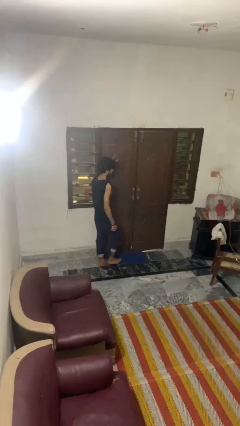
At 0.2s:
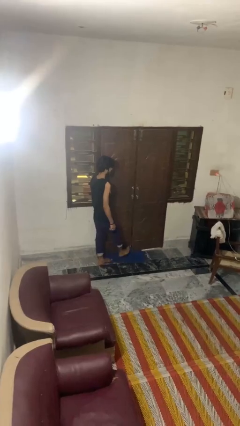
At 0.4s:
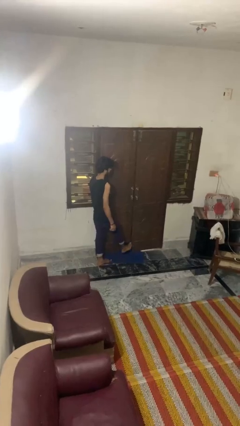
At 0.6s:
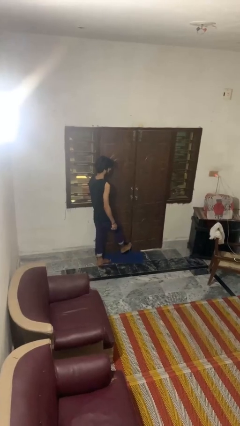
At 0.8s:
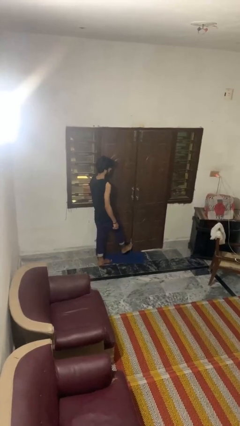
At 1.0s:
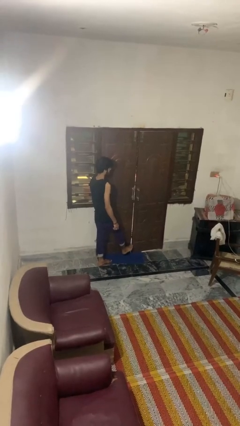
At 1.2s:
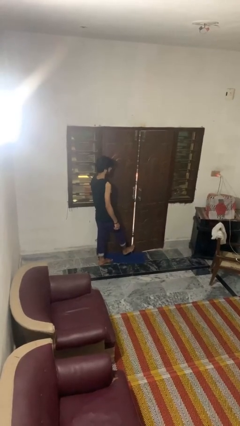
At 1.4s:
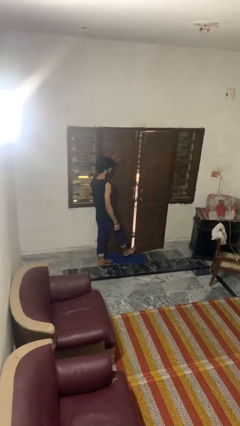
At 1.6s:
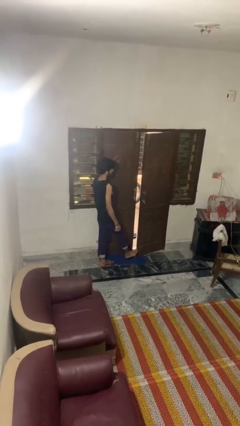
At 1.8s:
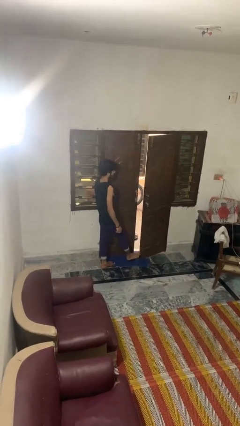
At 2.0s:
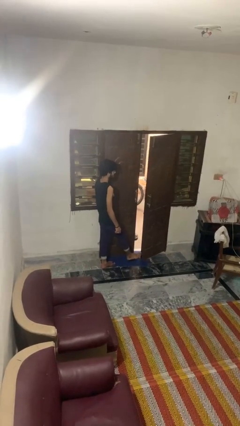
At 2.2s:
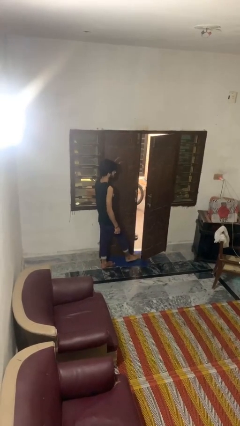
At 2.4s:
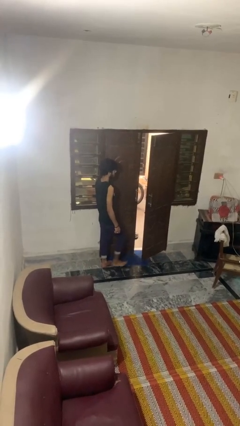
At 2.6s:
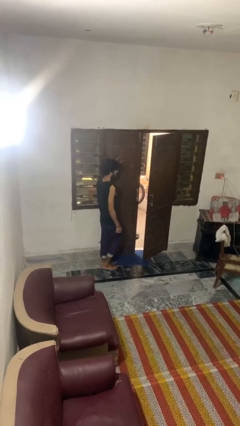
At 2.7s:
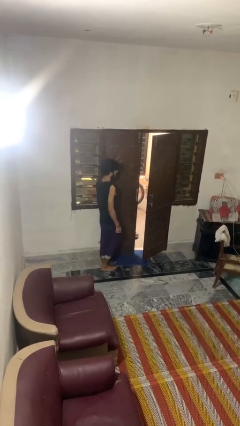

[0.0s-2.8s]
person opens facility door

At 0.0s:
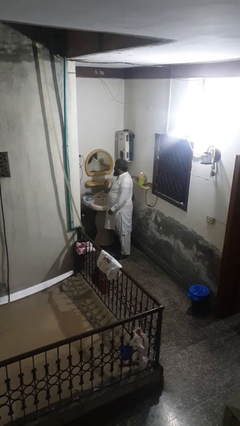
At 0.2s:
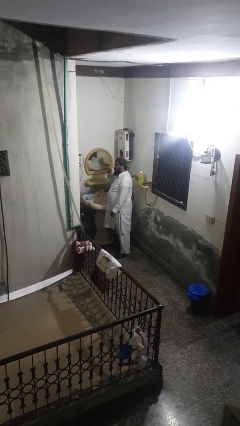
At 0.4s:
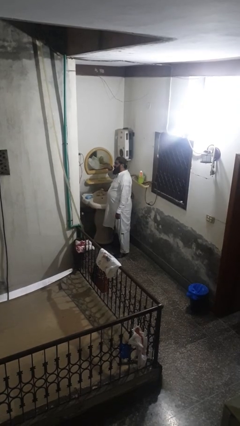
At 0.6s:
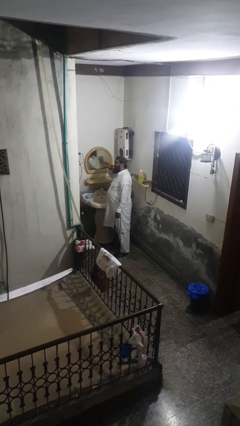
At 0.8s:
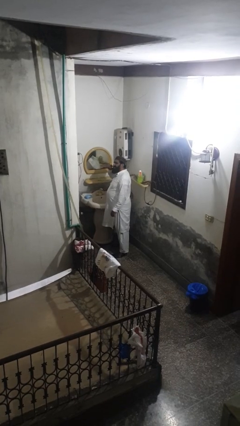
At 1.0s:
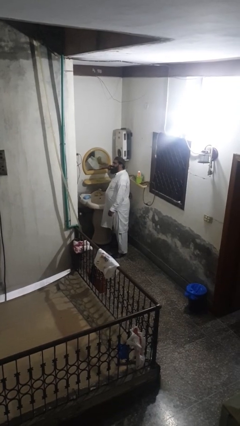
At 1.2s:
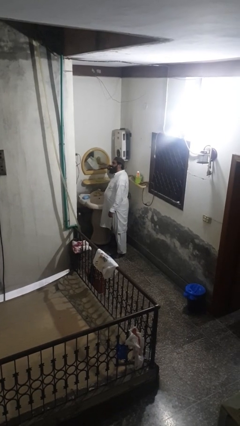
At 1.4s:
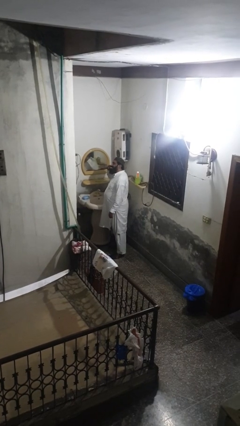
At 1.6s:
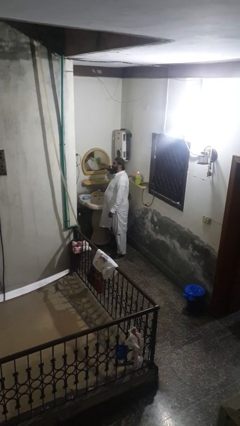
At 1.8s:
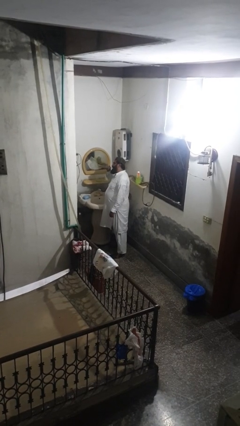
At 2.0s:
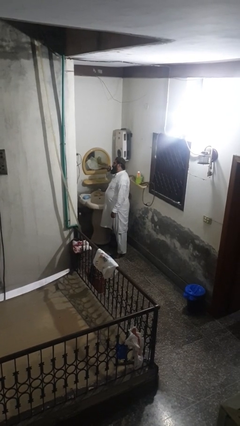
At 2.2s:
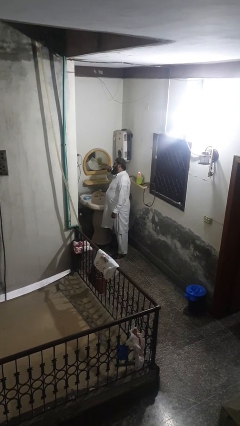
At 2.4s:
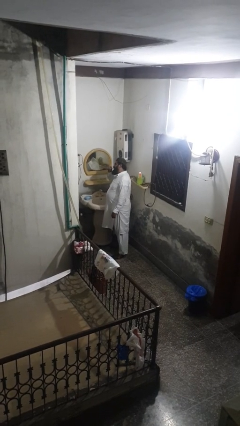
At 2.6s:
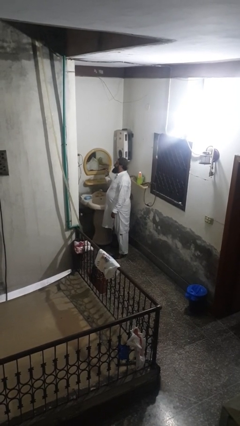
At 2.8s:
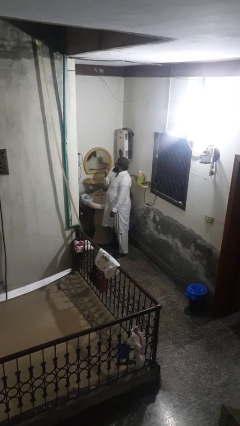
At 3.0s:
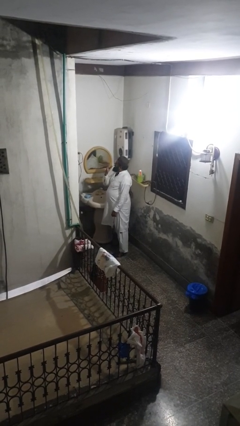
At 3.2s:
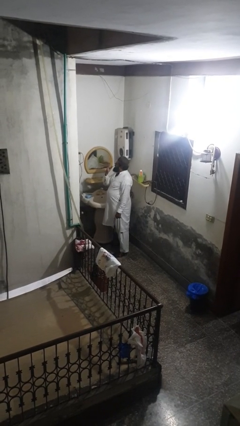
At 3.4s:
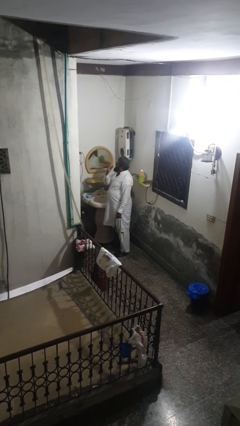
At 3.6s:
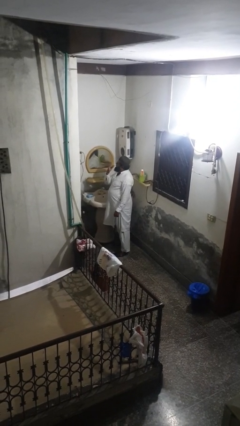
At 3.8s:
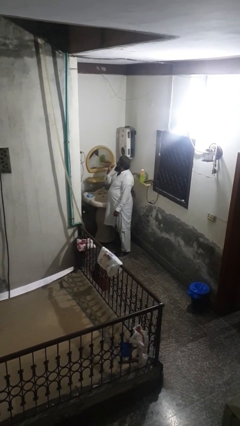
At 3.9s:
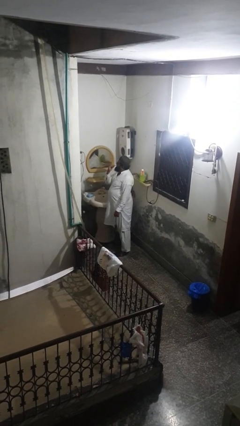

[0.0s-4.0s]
person brushes teeth

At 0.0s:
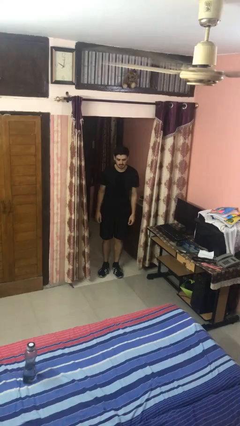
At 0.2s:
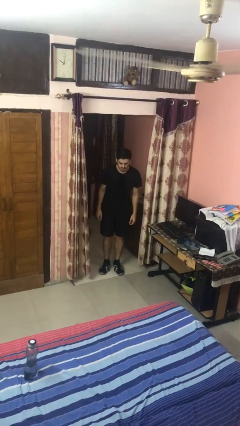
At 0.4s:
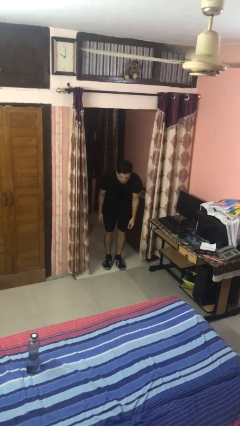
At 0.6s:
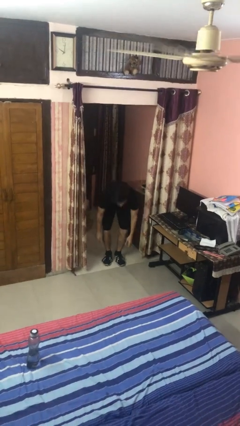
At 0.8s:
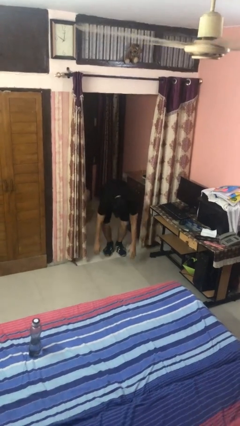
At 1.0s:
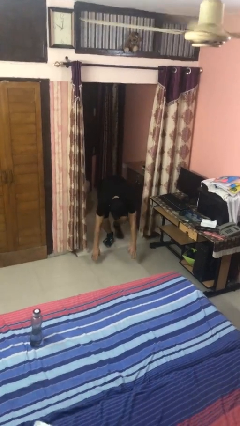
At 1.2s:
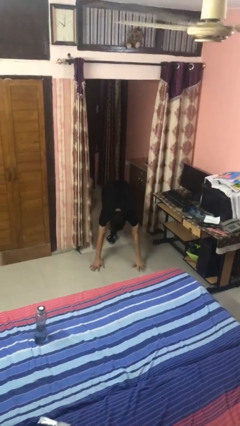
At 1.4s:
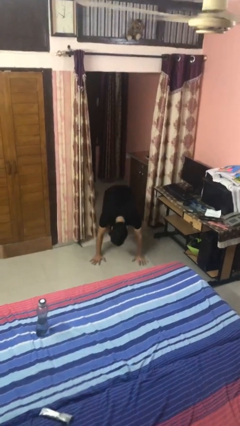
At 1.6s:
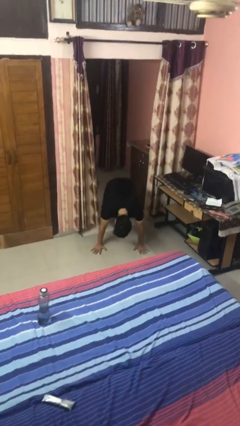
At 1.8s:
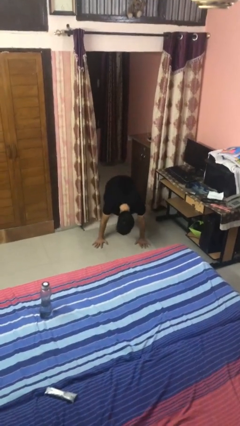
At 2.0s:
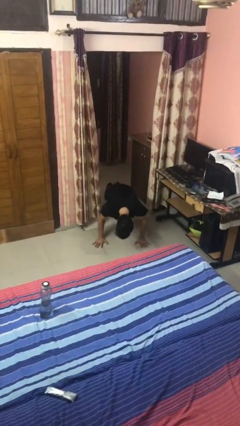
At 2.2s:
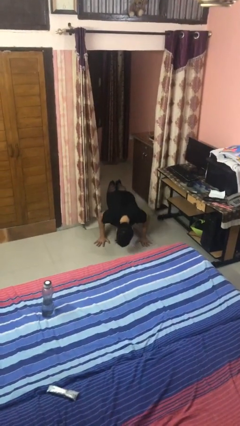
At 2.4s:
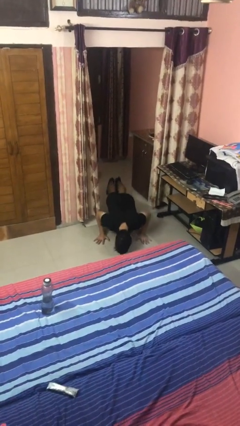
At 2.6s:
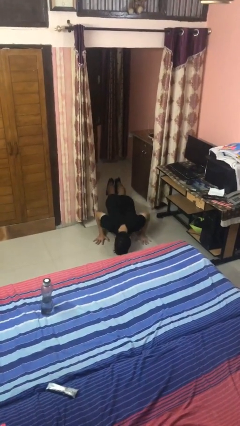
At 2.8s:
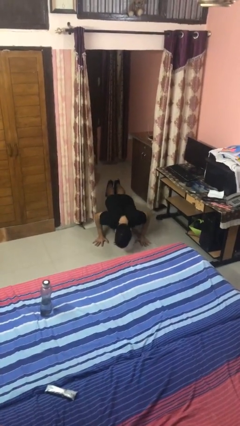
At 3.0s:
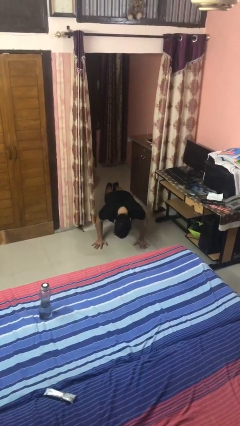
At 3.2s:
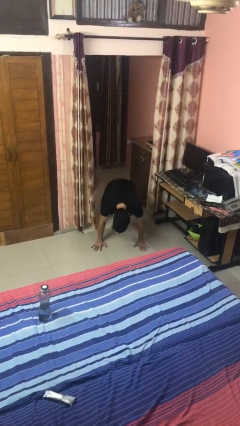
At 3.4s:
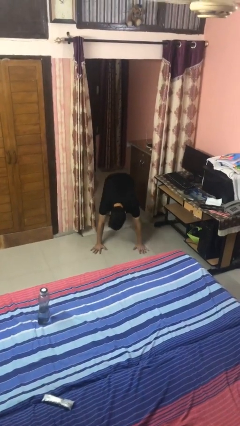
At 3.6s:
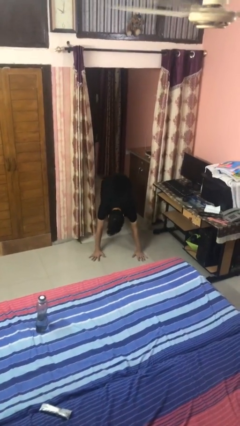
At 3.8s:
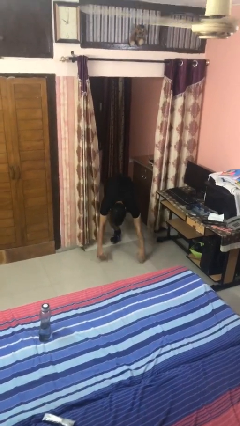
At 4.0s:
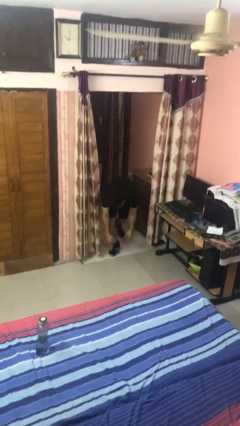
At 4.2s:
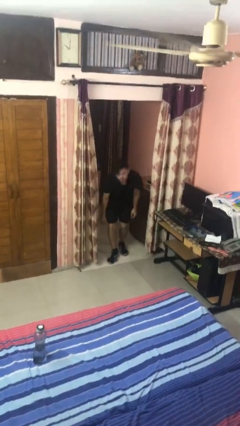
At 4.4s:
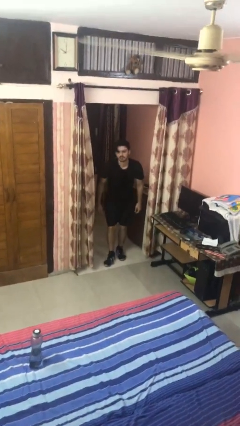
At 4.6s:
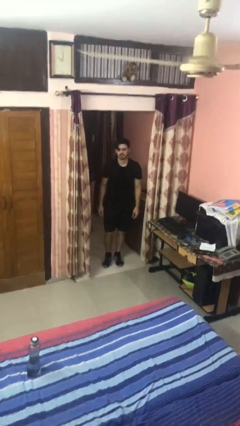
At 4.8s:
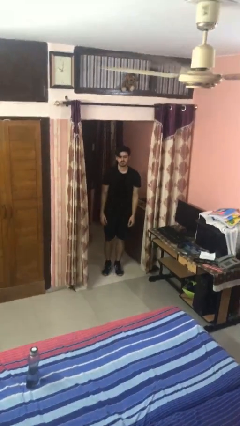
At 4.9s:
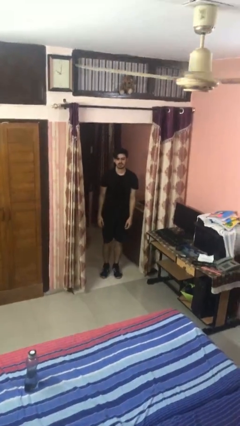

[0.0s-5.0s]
person exercises with pushup

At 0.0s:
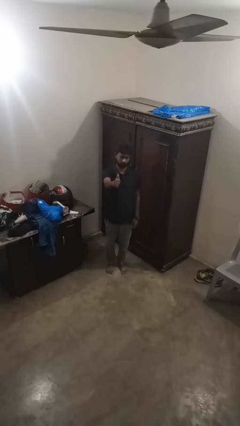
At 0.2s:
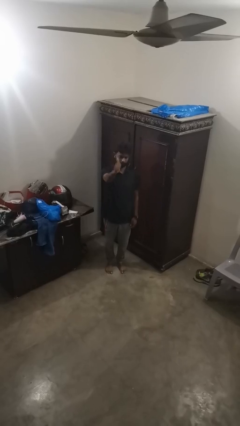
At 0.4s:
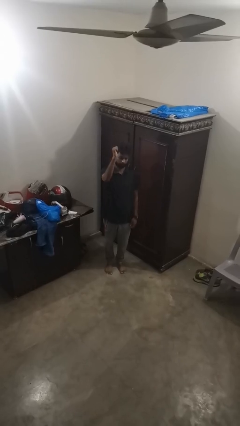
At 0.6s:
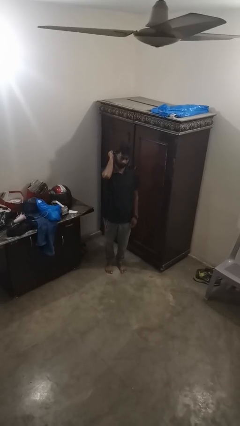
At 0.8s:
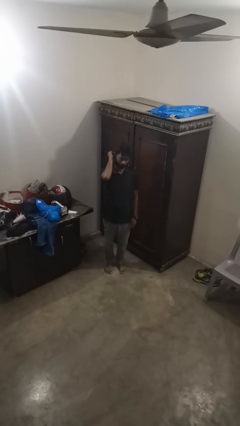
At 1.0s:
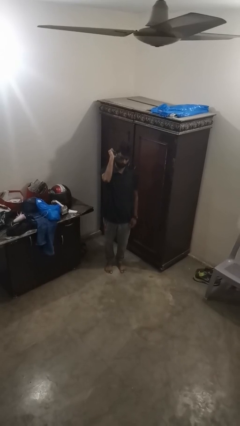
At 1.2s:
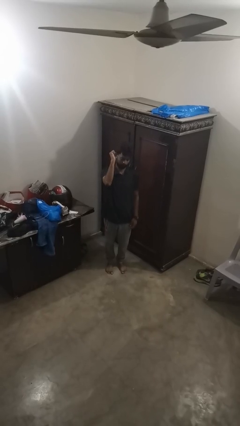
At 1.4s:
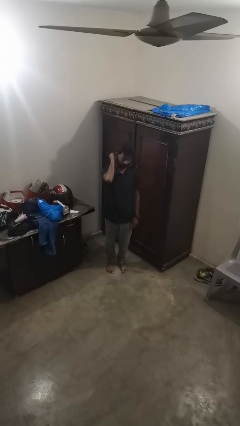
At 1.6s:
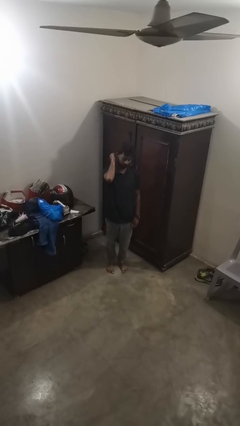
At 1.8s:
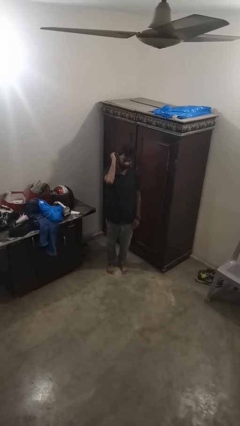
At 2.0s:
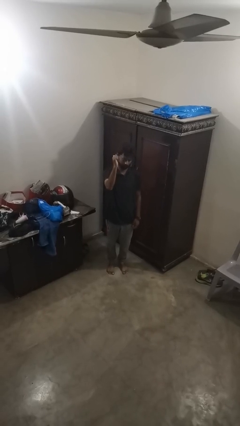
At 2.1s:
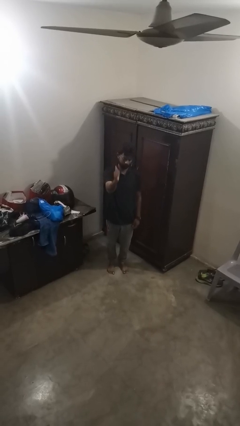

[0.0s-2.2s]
person gestures behind me

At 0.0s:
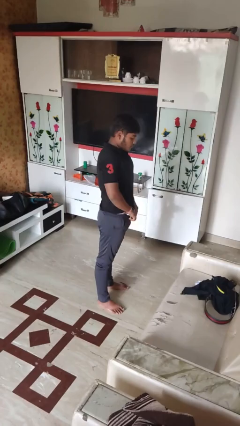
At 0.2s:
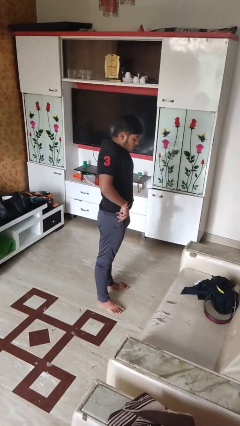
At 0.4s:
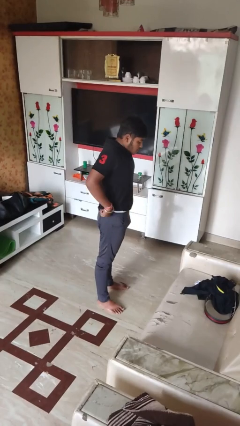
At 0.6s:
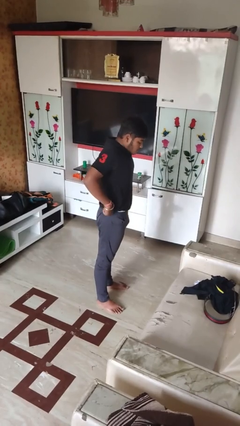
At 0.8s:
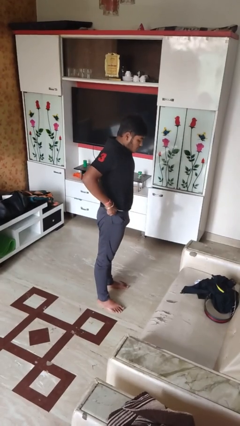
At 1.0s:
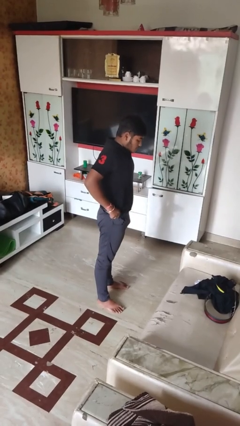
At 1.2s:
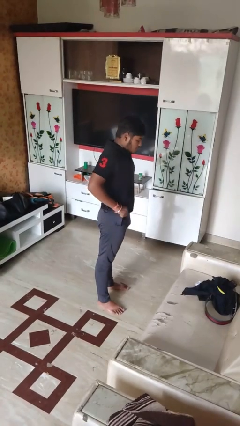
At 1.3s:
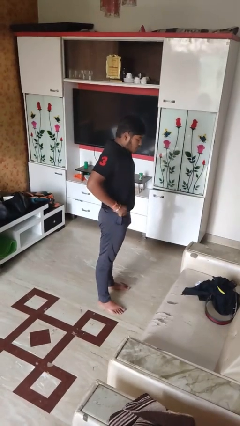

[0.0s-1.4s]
person hikes up pants

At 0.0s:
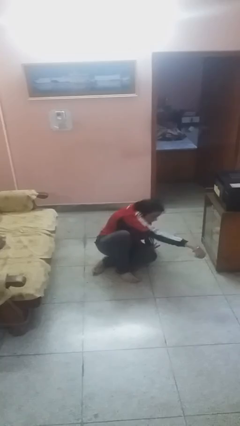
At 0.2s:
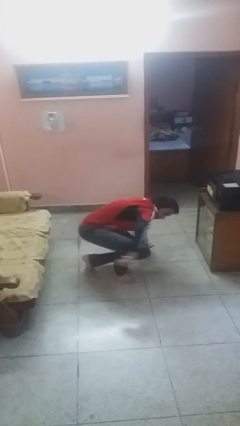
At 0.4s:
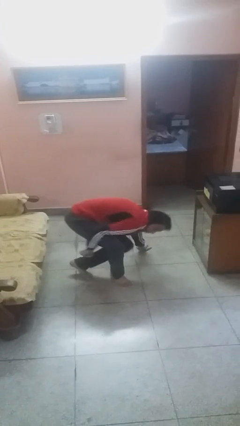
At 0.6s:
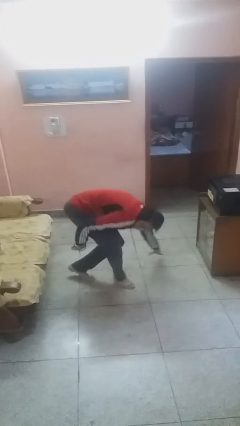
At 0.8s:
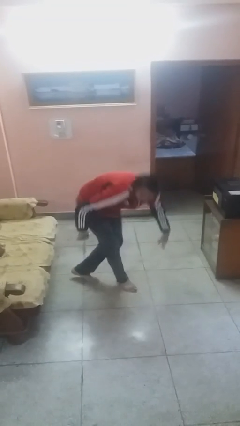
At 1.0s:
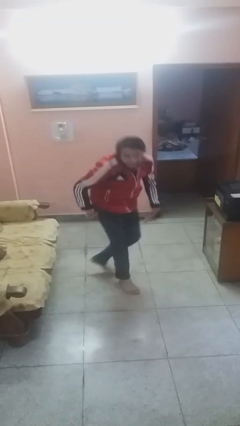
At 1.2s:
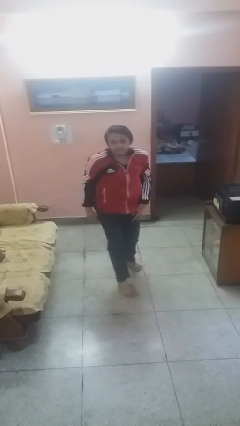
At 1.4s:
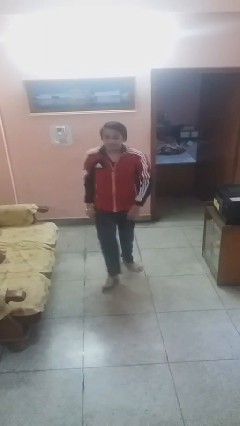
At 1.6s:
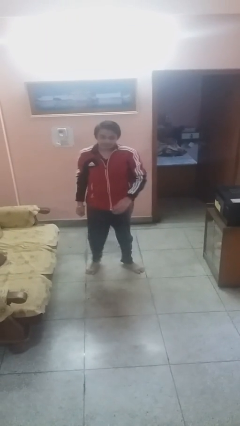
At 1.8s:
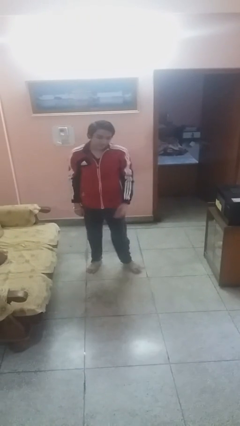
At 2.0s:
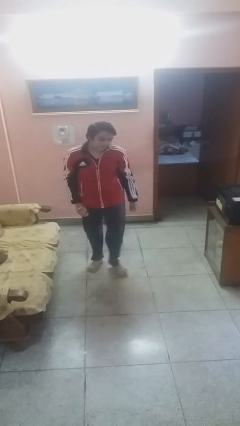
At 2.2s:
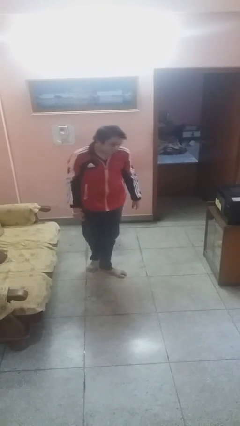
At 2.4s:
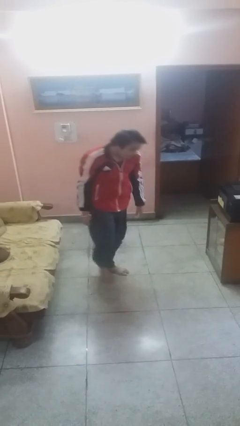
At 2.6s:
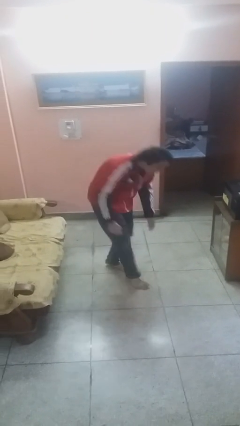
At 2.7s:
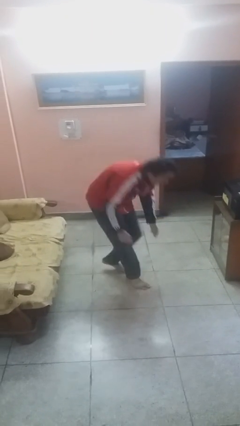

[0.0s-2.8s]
person stands up
